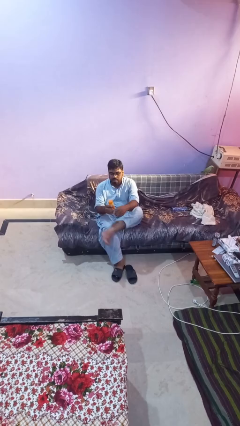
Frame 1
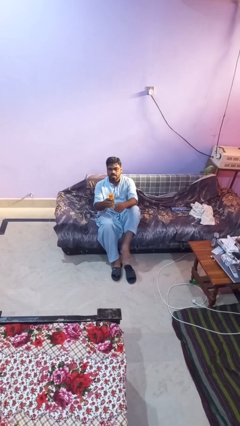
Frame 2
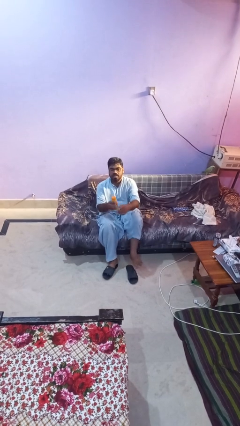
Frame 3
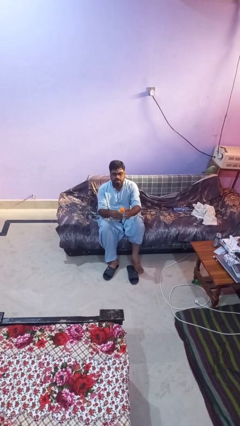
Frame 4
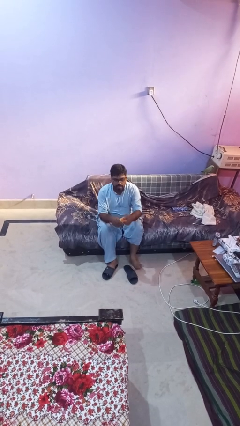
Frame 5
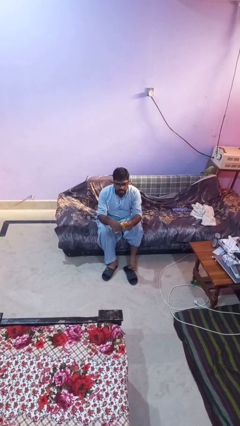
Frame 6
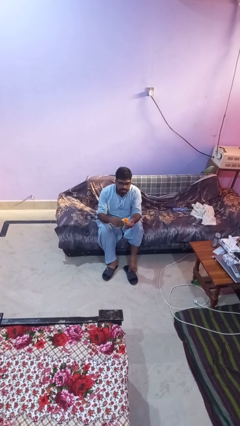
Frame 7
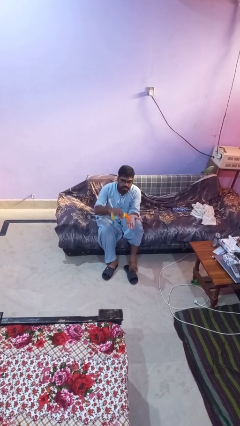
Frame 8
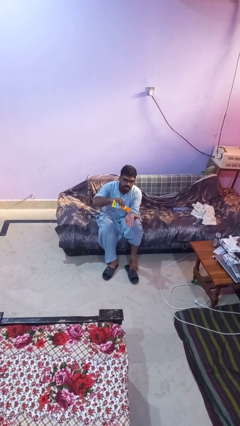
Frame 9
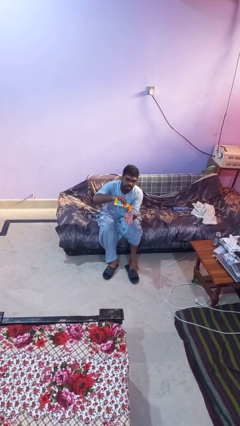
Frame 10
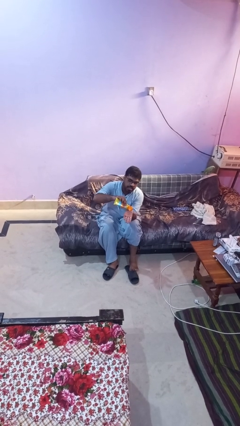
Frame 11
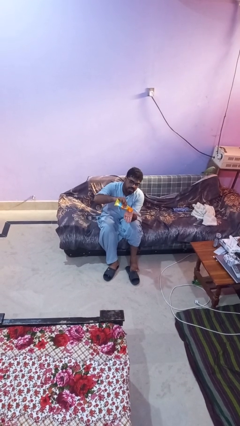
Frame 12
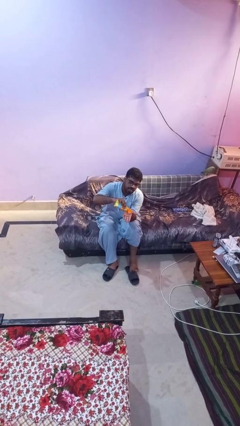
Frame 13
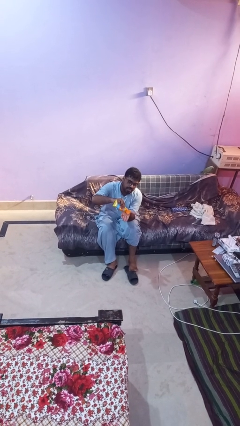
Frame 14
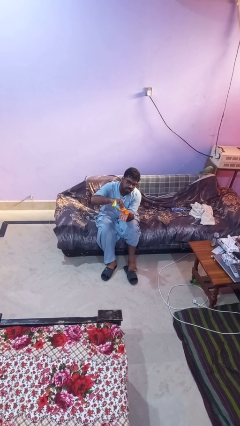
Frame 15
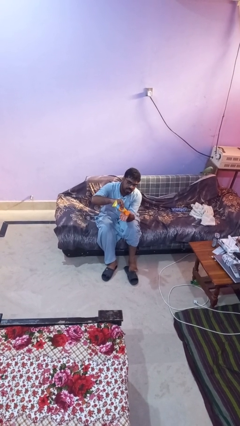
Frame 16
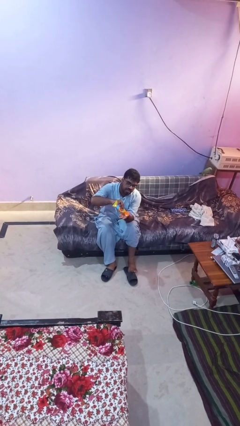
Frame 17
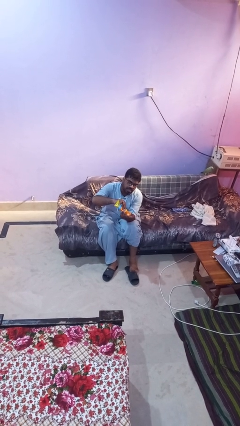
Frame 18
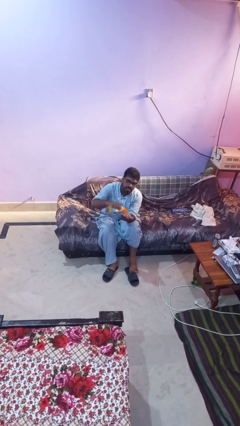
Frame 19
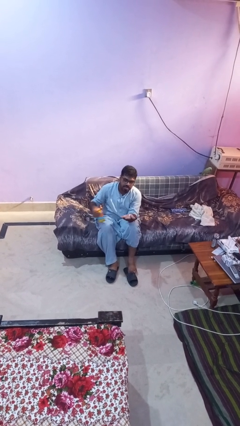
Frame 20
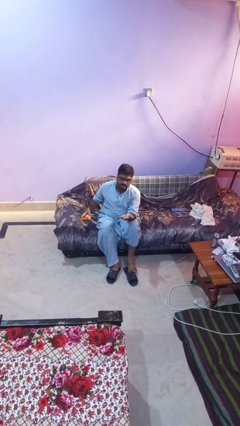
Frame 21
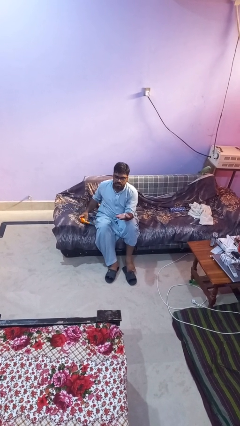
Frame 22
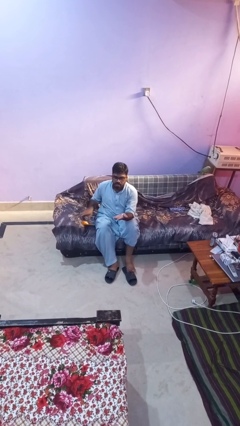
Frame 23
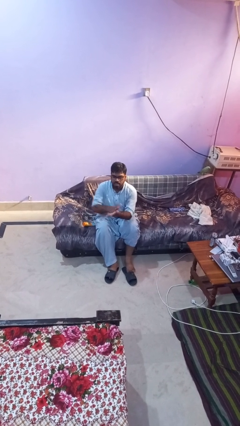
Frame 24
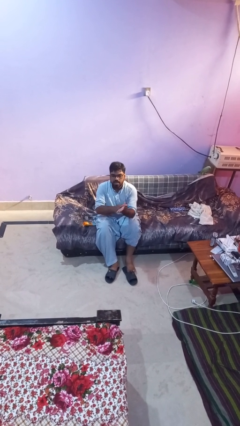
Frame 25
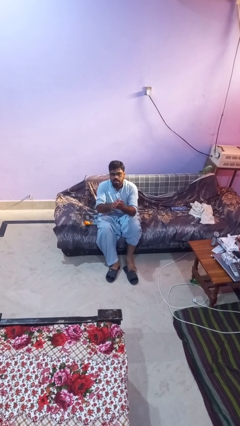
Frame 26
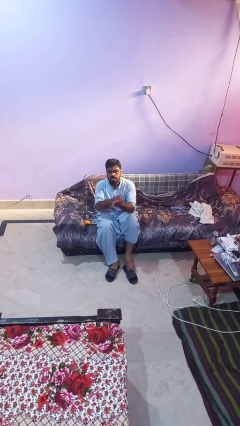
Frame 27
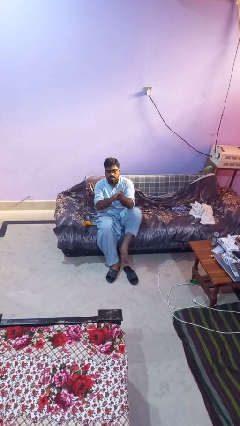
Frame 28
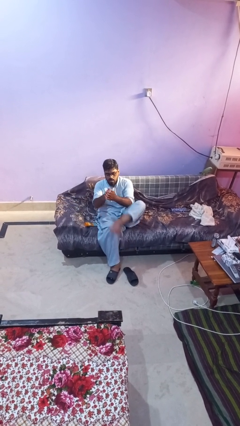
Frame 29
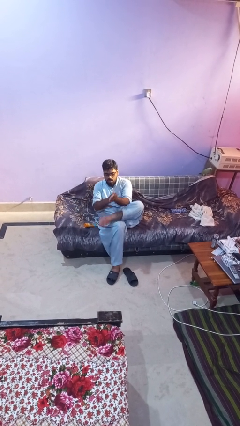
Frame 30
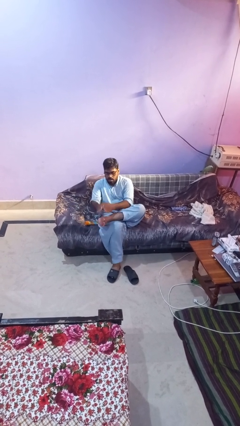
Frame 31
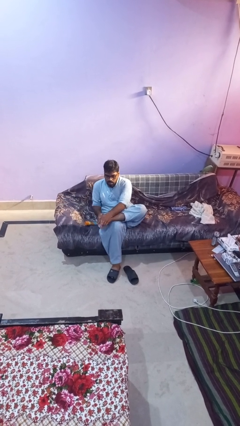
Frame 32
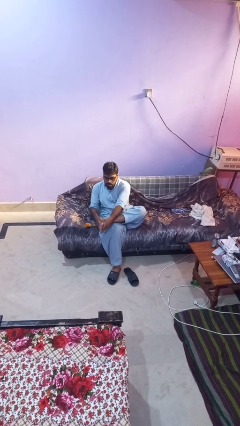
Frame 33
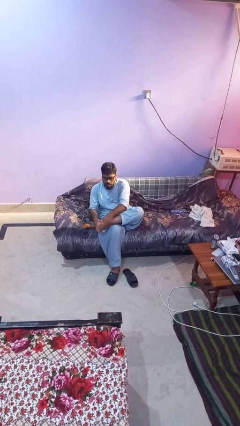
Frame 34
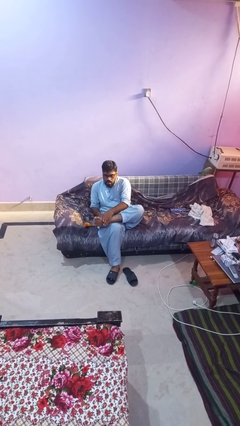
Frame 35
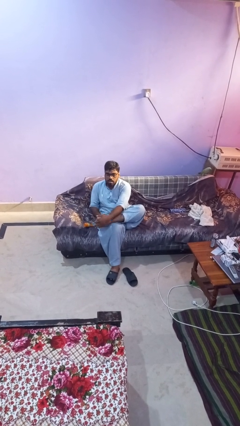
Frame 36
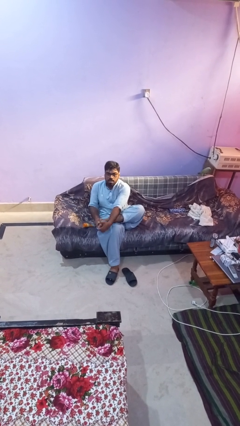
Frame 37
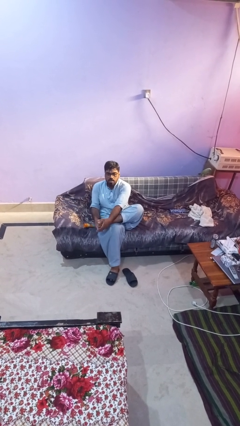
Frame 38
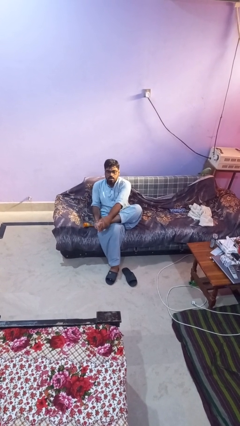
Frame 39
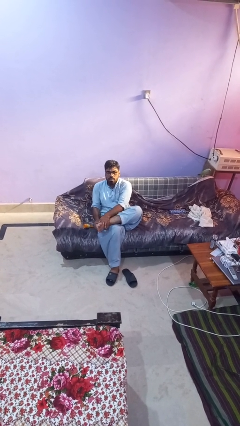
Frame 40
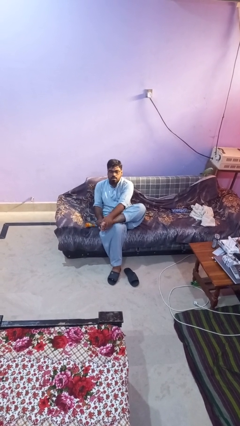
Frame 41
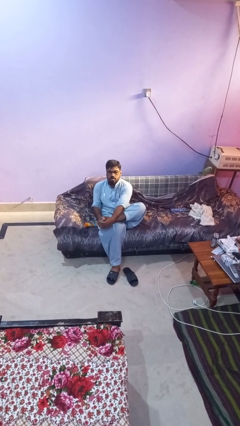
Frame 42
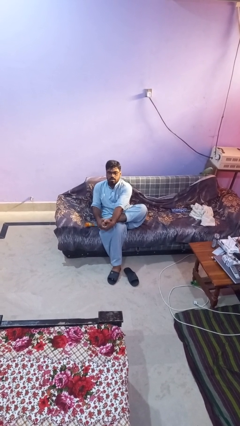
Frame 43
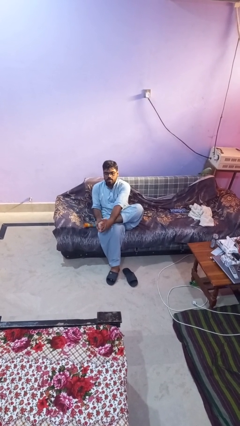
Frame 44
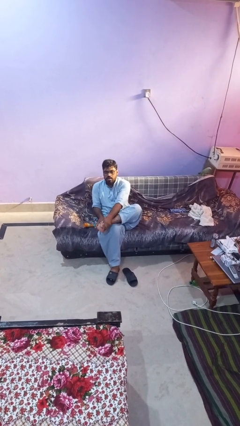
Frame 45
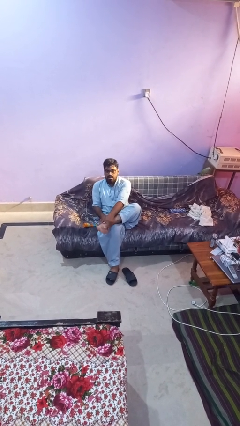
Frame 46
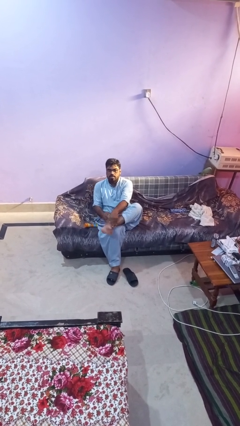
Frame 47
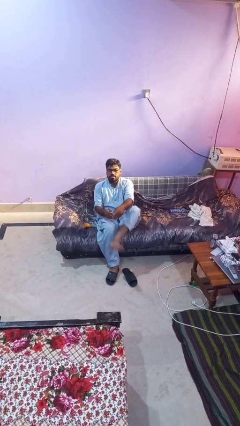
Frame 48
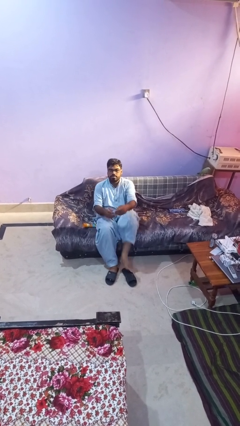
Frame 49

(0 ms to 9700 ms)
person applies sunscreen

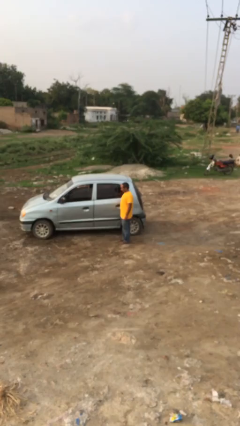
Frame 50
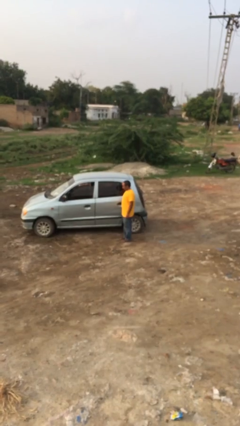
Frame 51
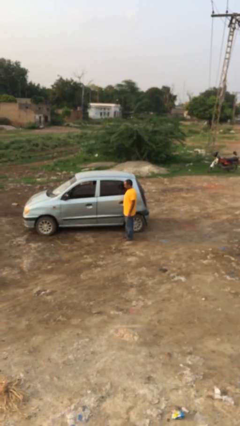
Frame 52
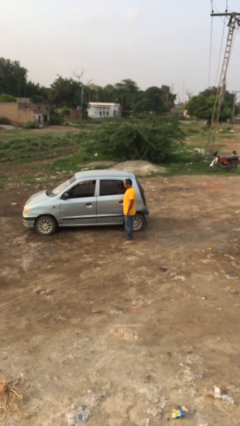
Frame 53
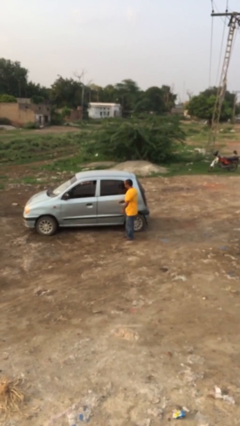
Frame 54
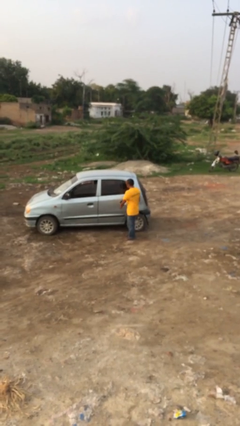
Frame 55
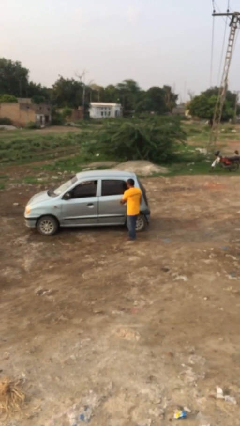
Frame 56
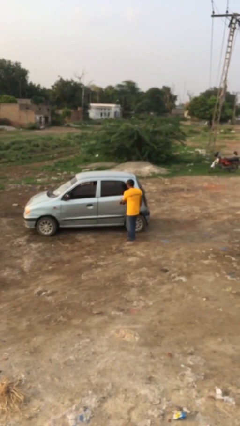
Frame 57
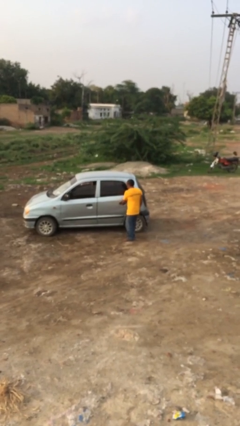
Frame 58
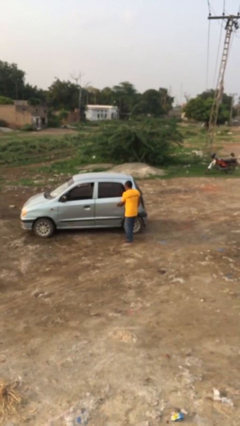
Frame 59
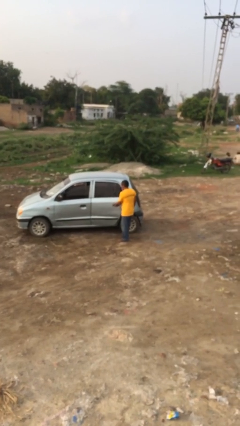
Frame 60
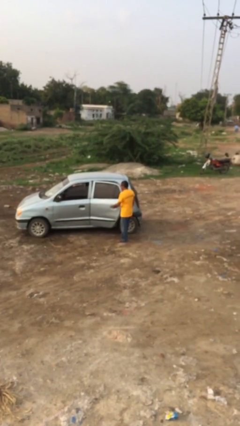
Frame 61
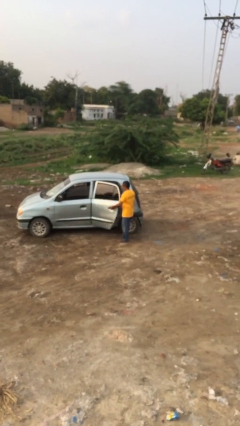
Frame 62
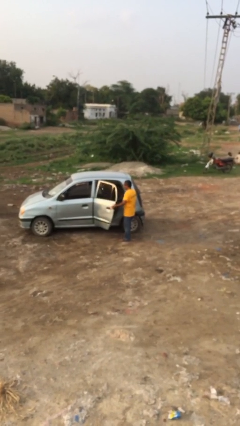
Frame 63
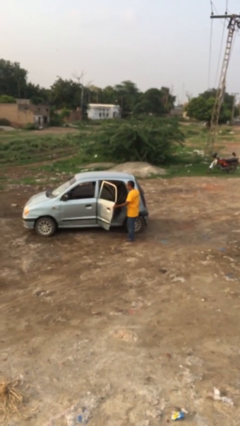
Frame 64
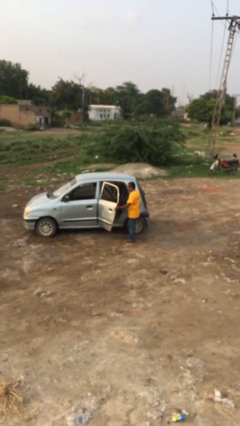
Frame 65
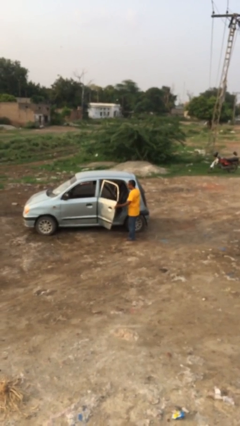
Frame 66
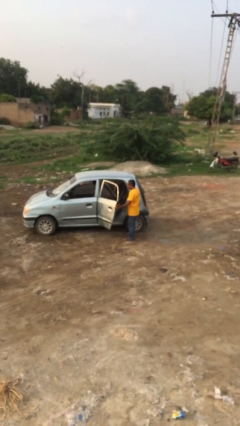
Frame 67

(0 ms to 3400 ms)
person opens car door

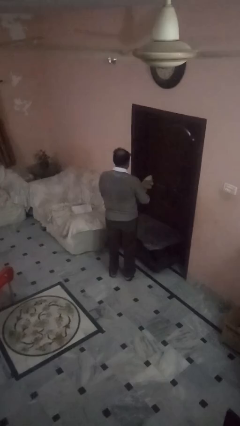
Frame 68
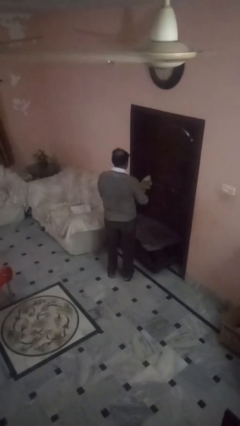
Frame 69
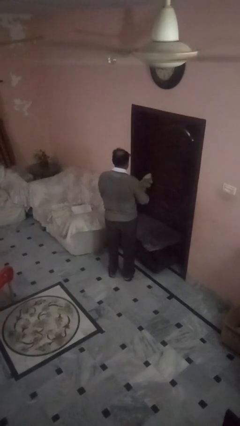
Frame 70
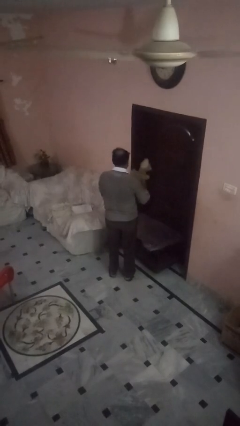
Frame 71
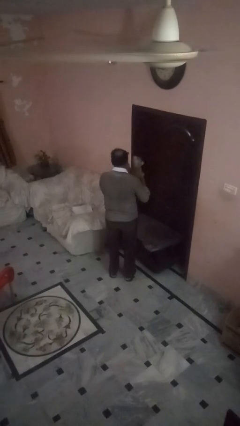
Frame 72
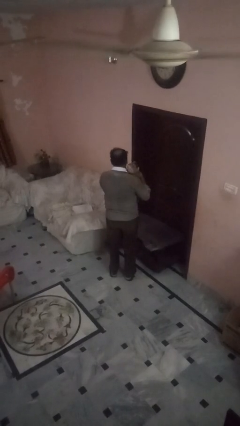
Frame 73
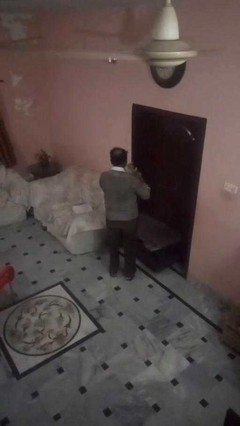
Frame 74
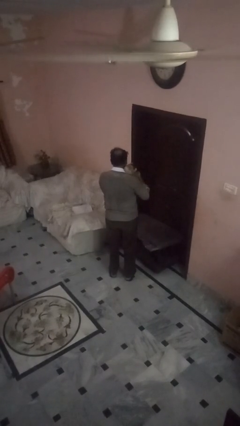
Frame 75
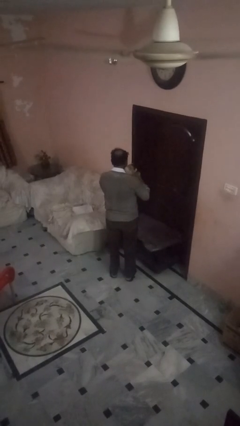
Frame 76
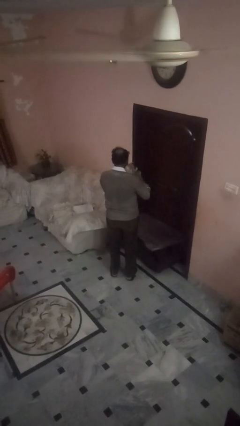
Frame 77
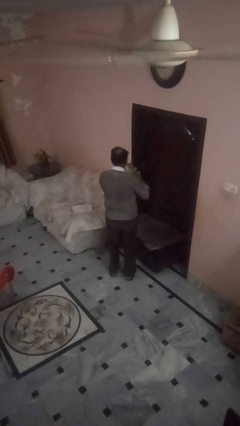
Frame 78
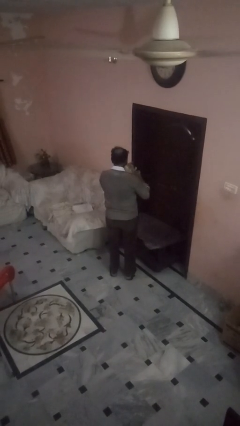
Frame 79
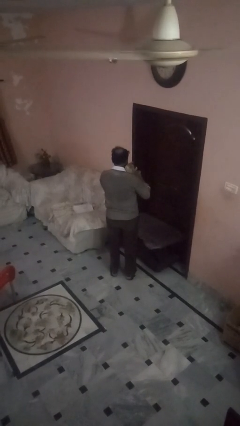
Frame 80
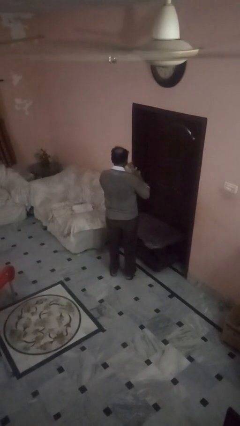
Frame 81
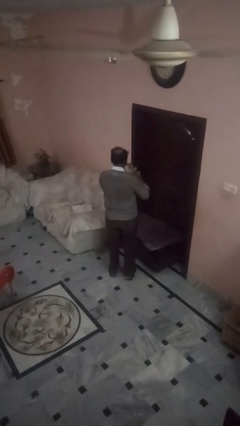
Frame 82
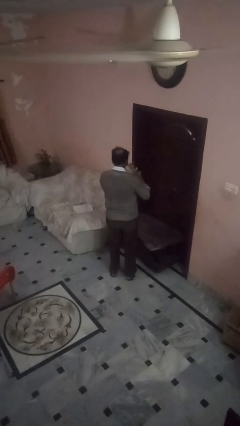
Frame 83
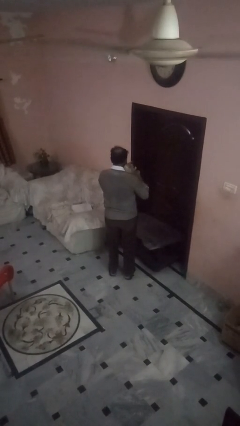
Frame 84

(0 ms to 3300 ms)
person hugs stuffed animal

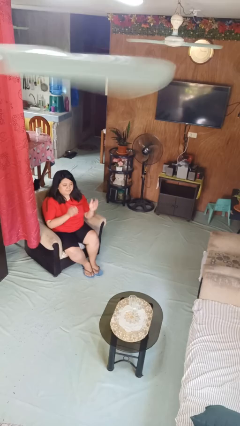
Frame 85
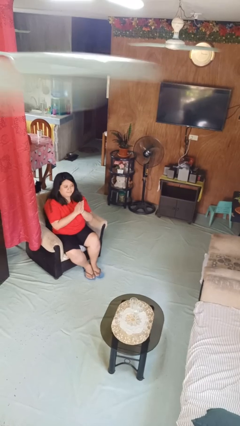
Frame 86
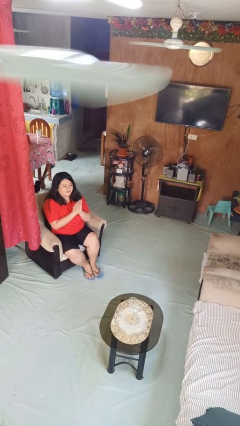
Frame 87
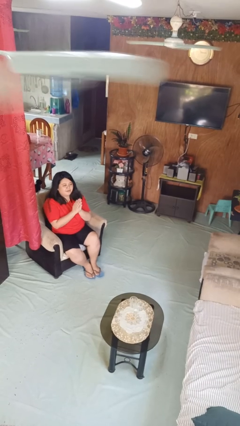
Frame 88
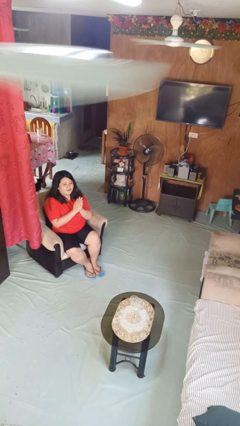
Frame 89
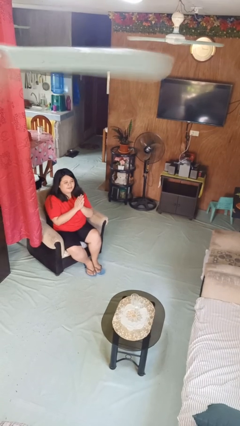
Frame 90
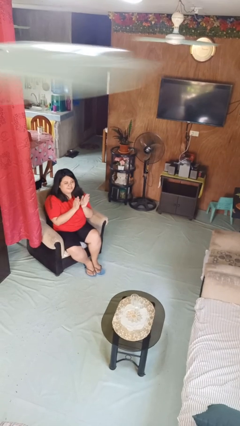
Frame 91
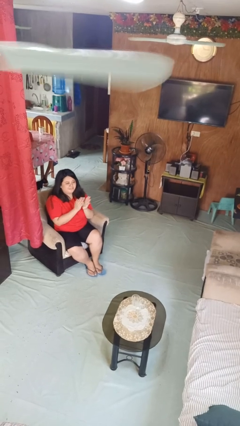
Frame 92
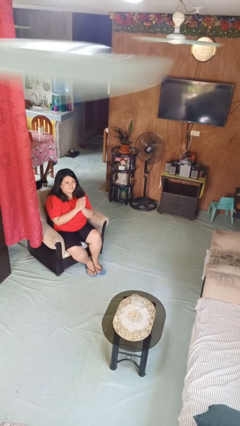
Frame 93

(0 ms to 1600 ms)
person claps hands
